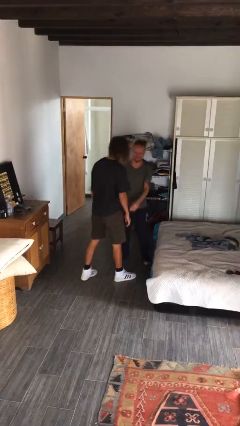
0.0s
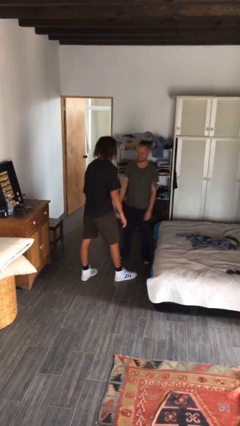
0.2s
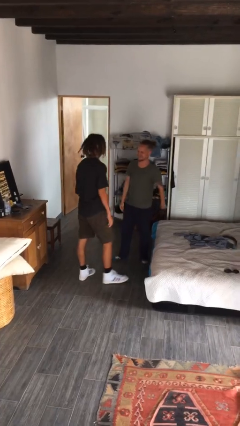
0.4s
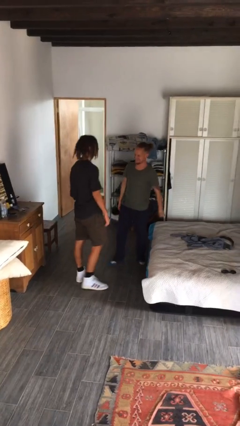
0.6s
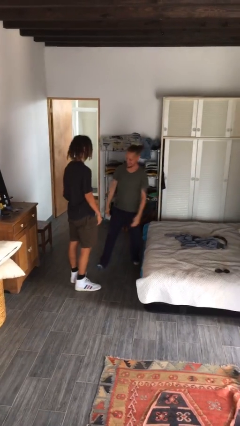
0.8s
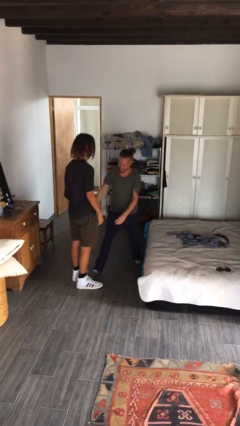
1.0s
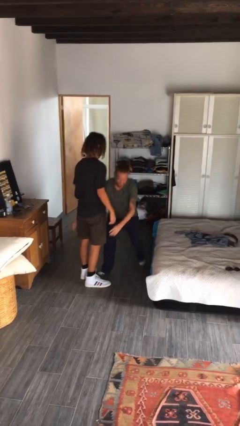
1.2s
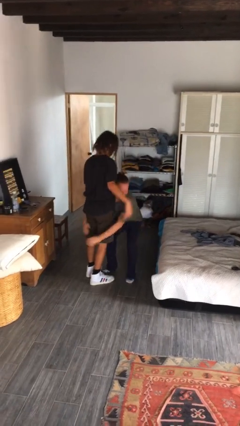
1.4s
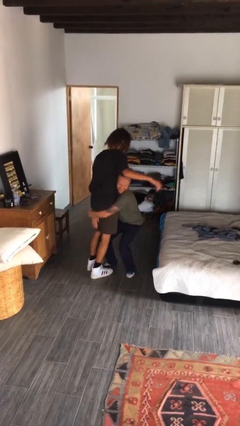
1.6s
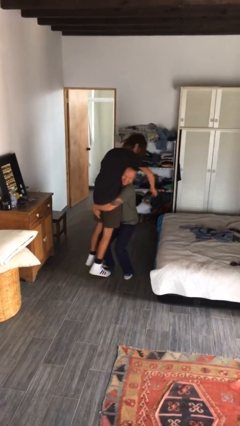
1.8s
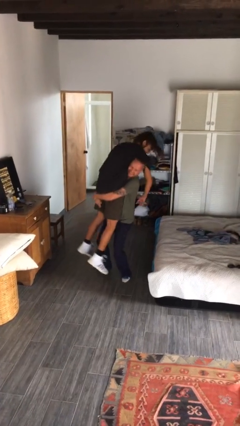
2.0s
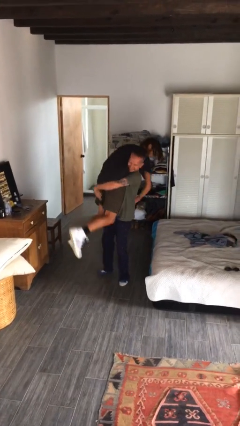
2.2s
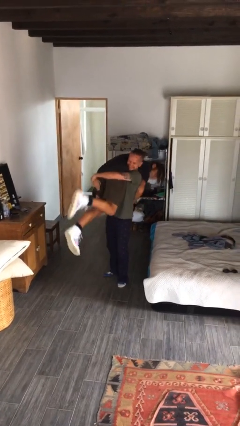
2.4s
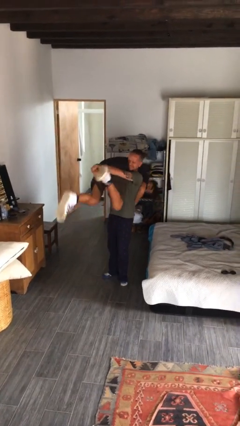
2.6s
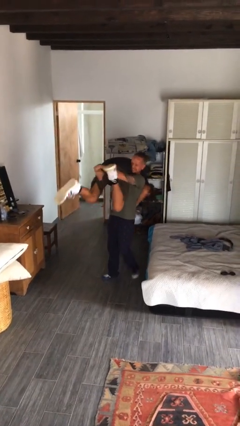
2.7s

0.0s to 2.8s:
person picks up person

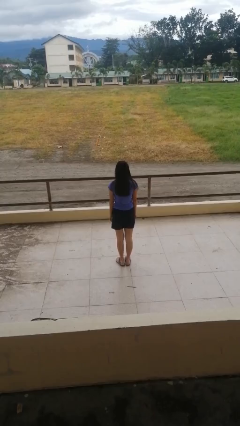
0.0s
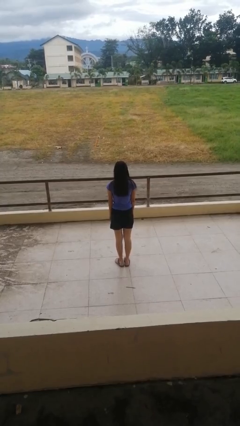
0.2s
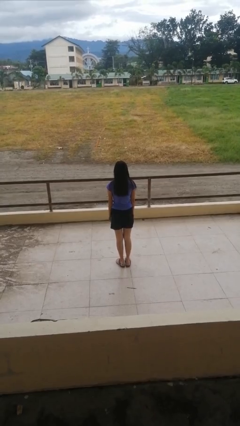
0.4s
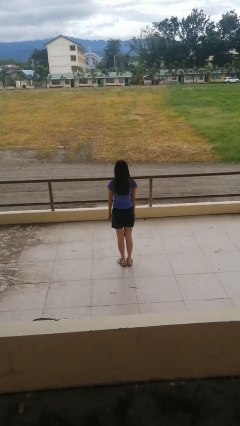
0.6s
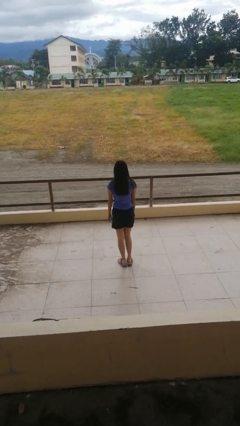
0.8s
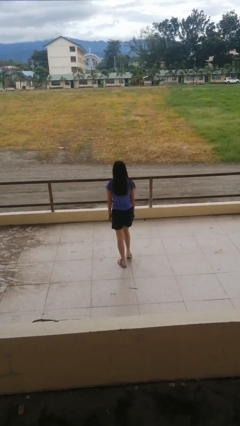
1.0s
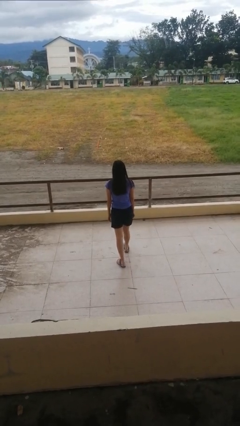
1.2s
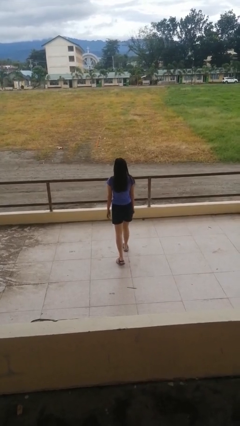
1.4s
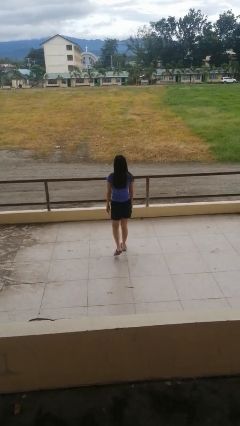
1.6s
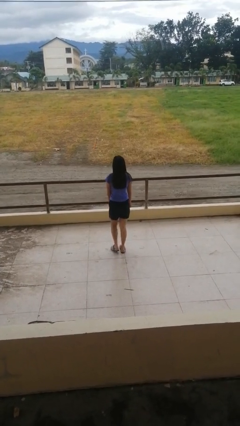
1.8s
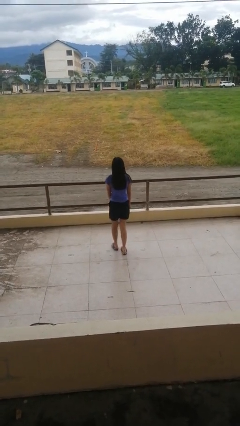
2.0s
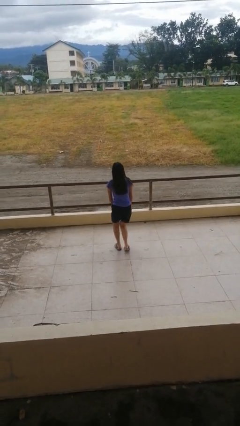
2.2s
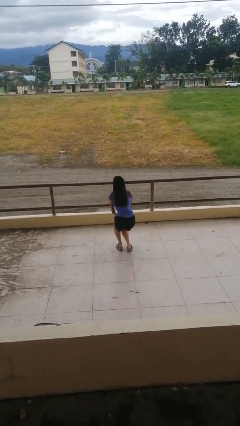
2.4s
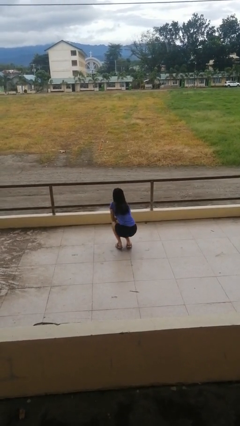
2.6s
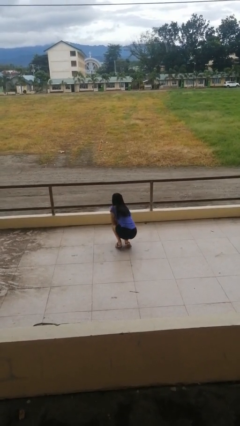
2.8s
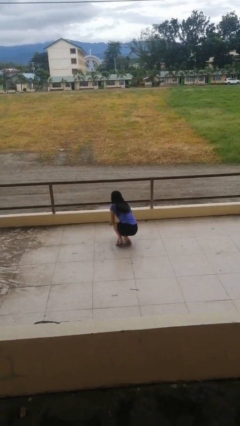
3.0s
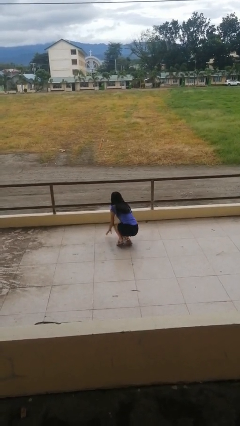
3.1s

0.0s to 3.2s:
person trips on object on floor

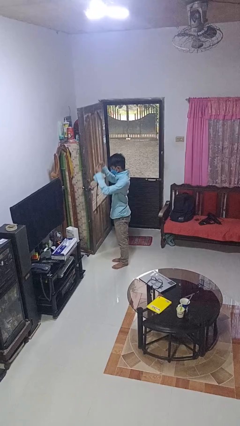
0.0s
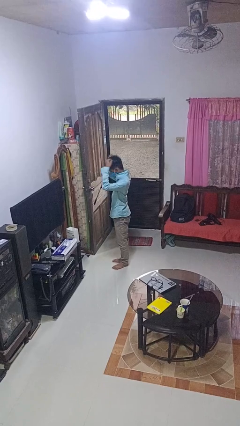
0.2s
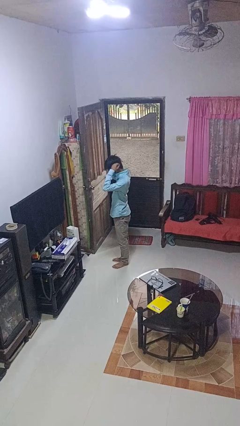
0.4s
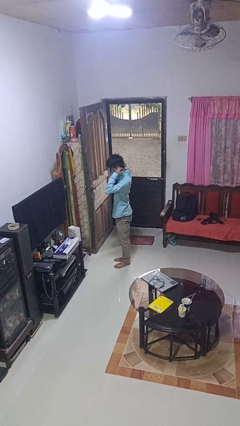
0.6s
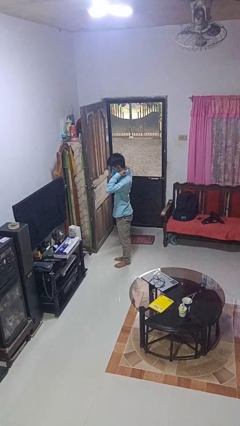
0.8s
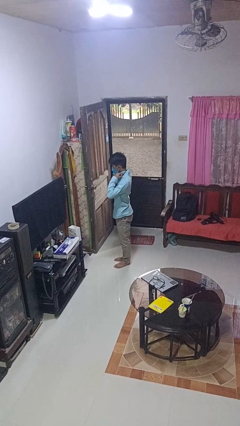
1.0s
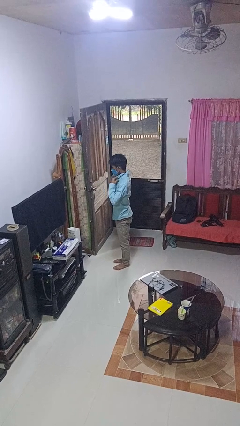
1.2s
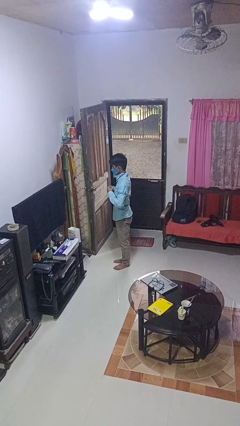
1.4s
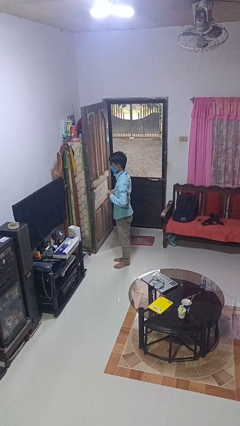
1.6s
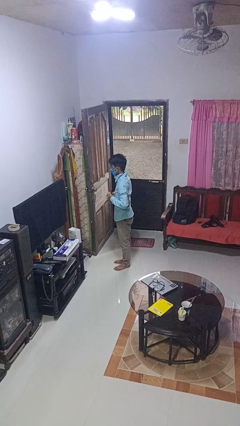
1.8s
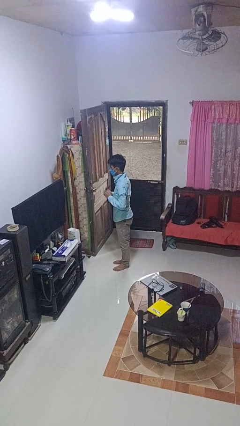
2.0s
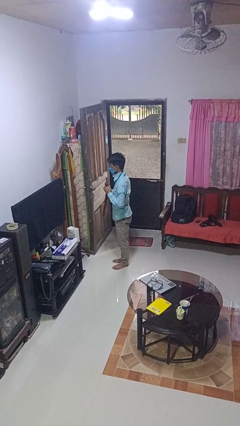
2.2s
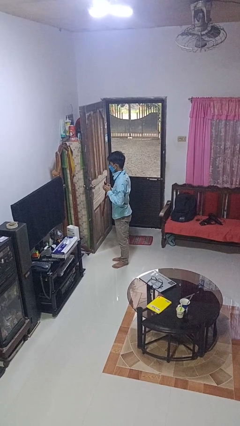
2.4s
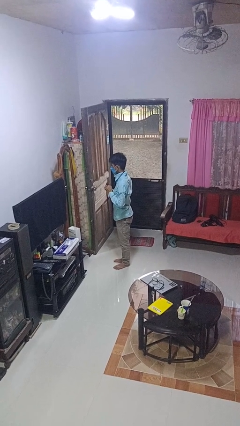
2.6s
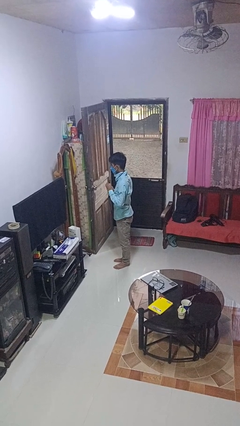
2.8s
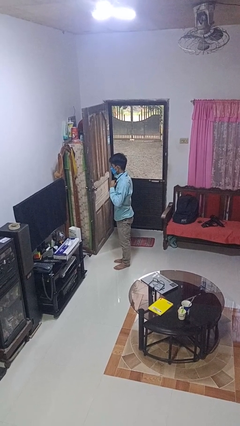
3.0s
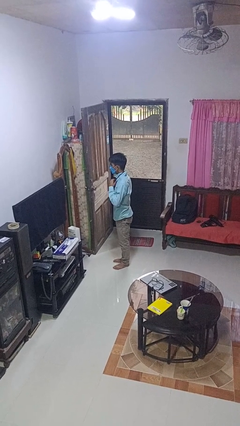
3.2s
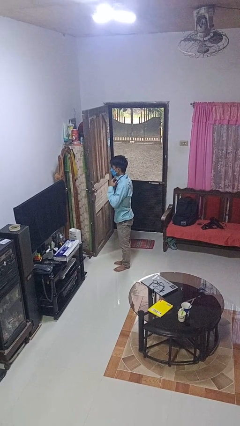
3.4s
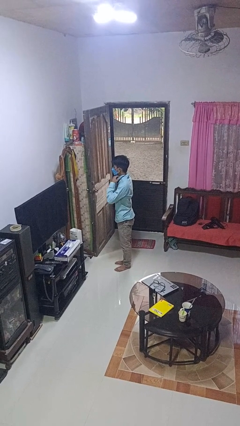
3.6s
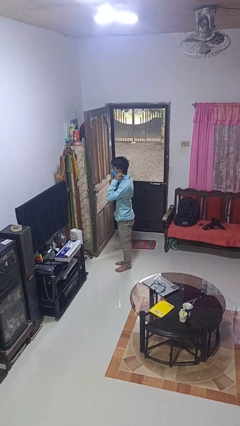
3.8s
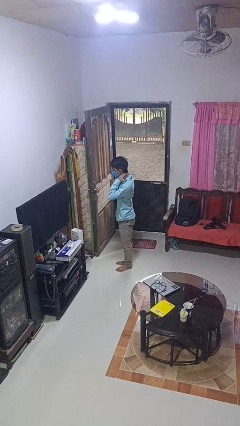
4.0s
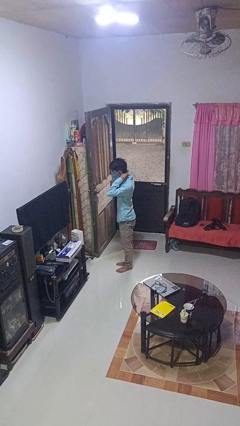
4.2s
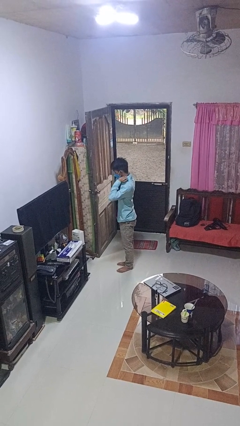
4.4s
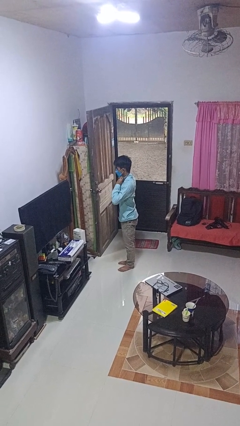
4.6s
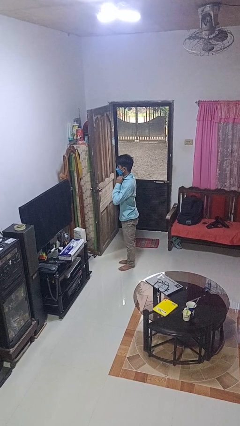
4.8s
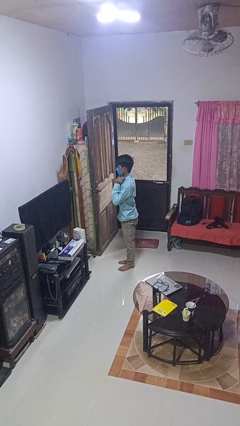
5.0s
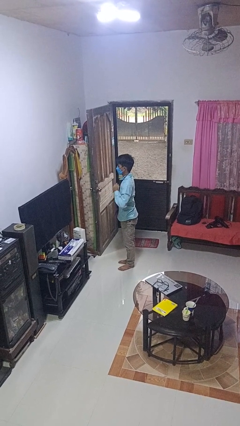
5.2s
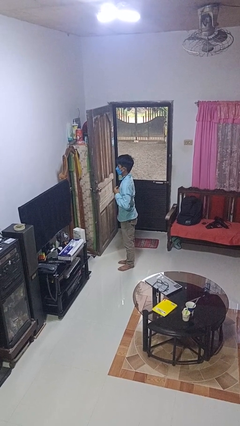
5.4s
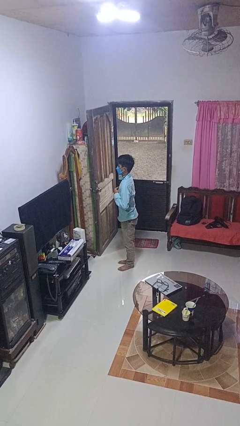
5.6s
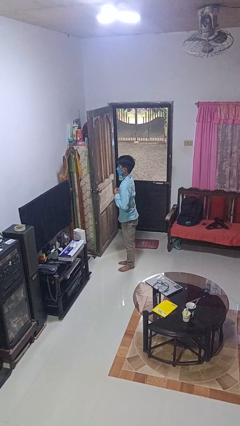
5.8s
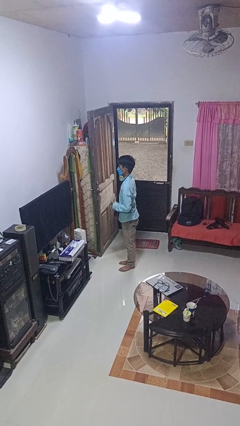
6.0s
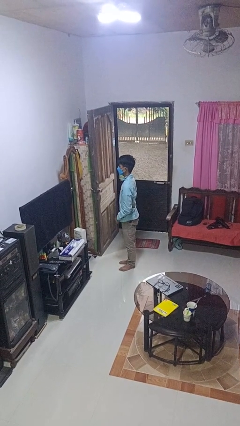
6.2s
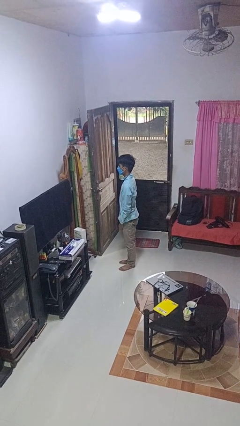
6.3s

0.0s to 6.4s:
person puts on necktie

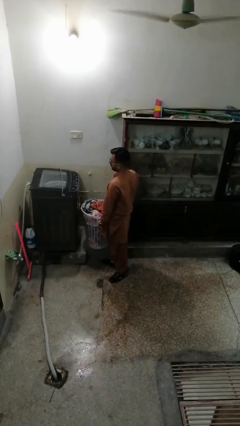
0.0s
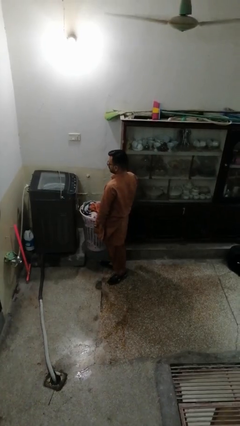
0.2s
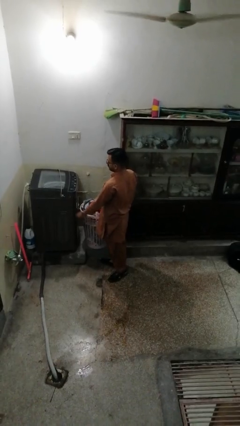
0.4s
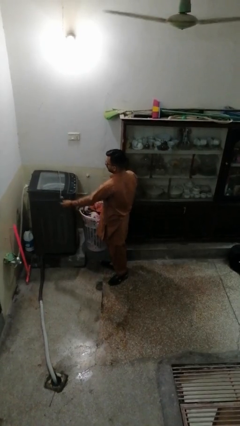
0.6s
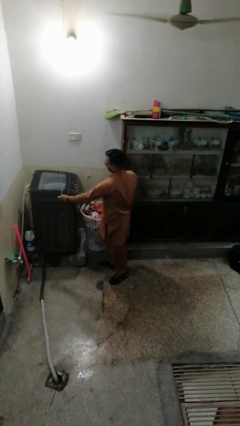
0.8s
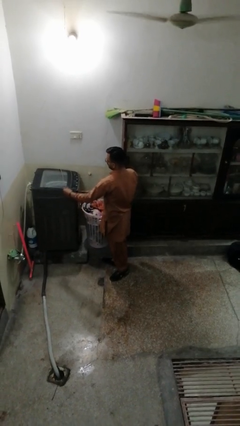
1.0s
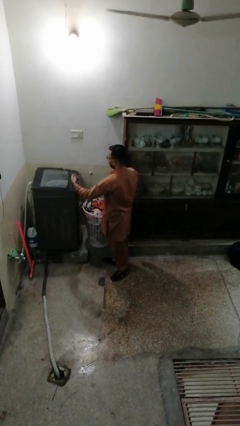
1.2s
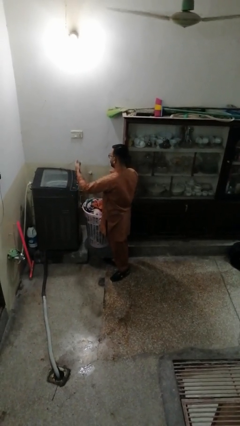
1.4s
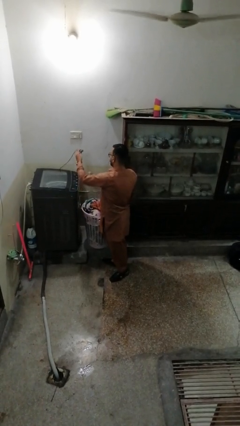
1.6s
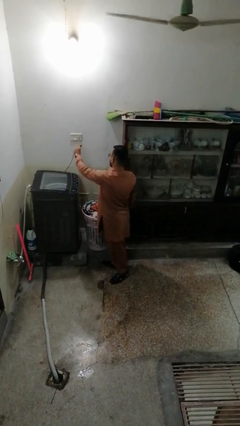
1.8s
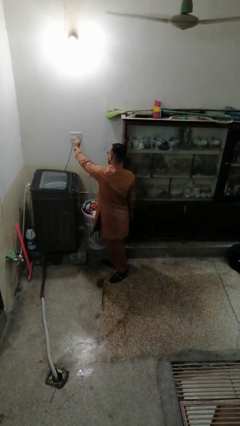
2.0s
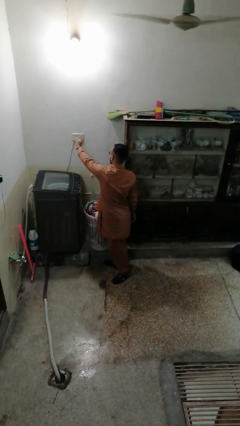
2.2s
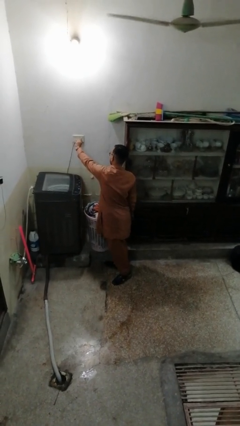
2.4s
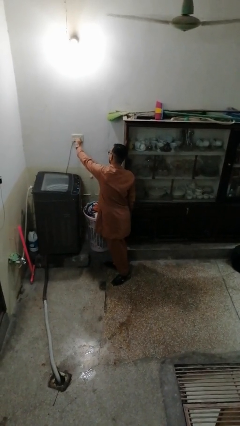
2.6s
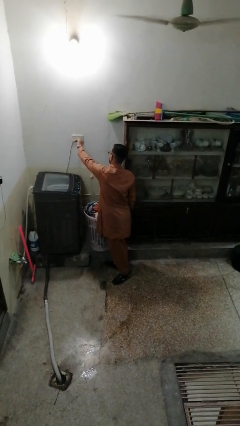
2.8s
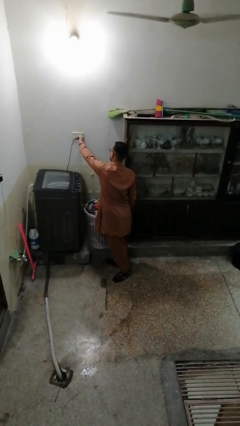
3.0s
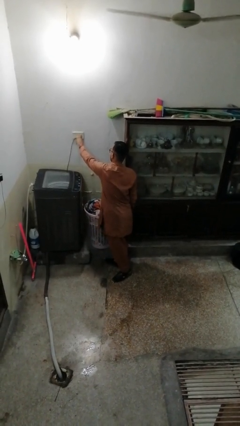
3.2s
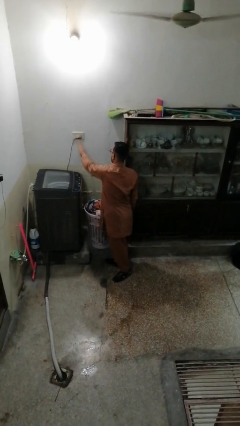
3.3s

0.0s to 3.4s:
person plugs into electrical socket

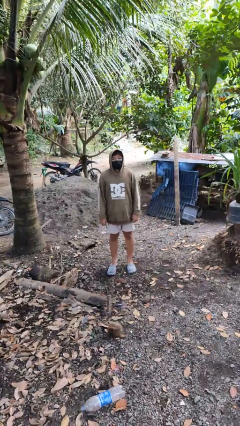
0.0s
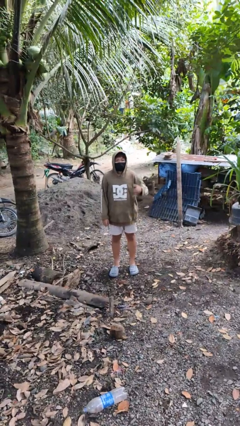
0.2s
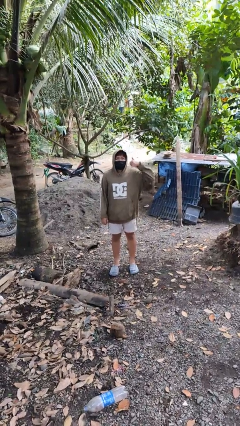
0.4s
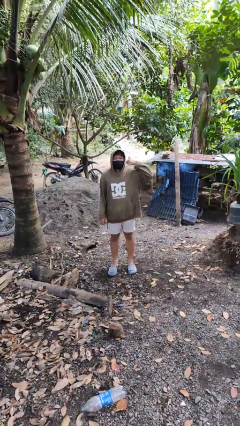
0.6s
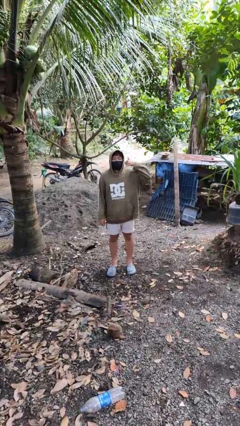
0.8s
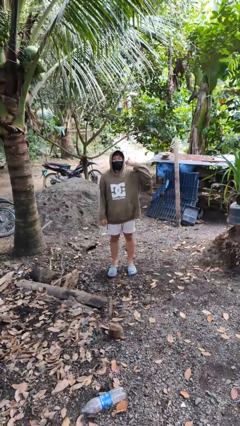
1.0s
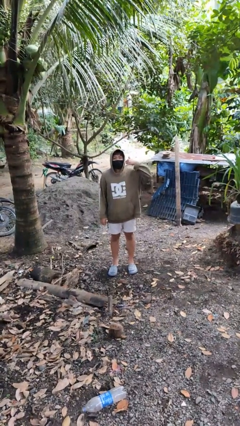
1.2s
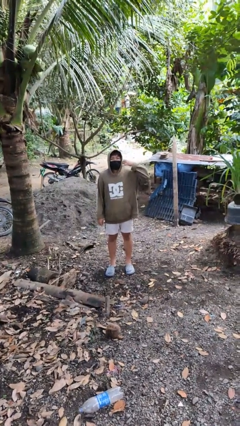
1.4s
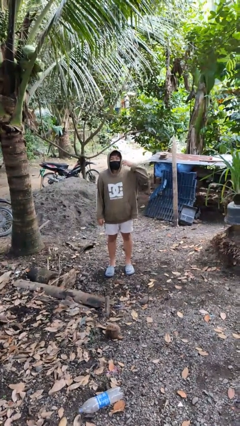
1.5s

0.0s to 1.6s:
person gestures call me
